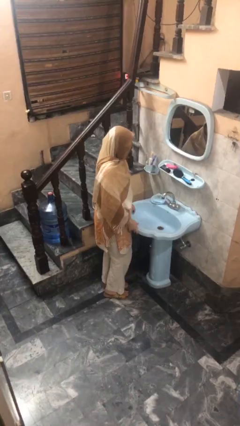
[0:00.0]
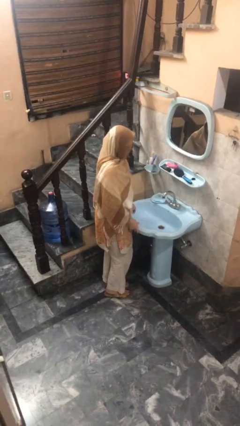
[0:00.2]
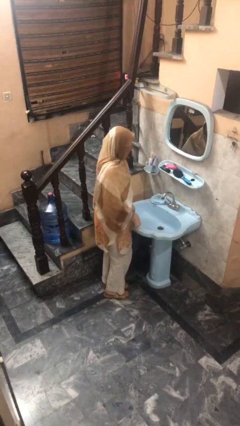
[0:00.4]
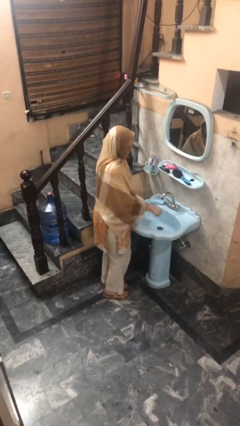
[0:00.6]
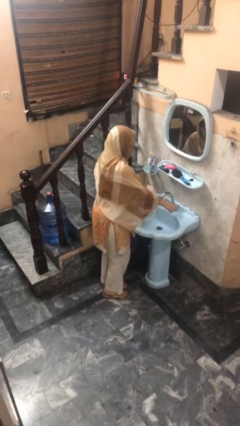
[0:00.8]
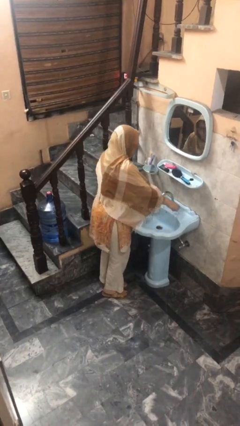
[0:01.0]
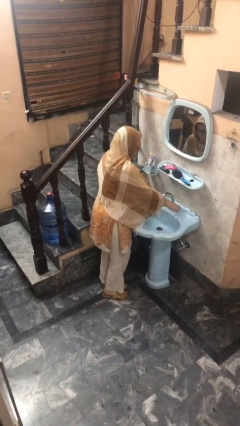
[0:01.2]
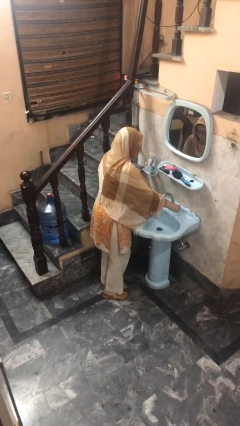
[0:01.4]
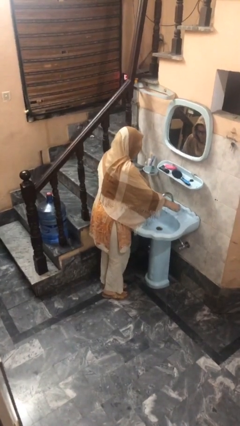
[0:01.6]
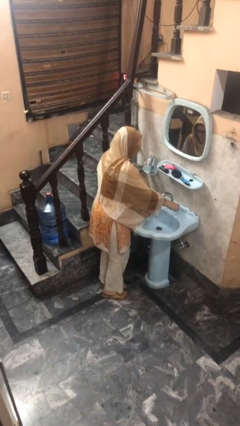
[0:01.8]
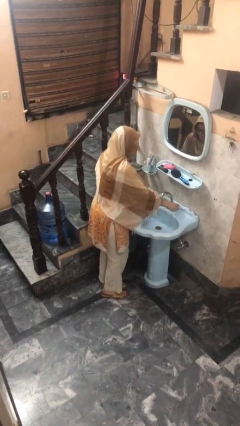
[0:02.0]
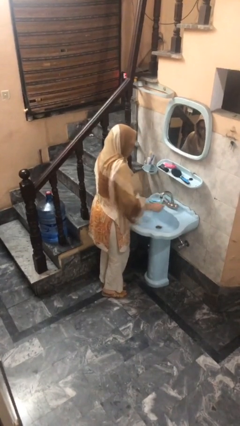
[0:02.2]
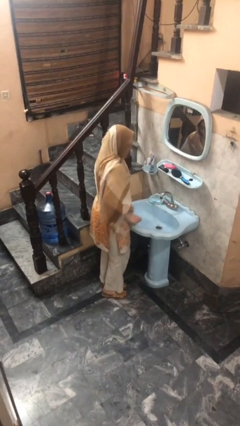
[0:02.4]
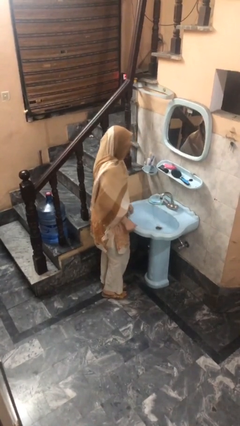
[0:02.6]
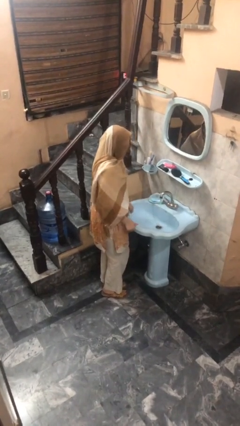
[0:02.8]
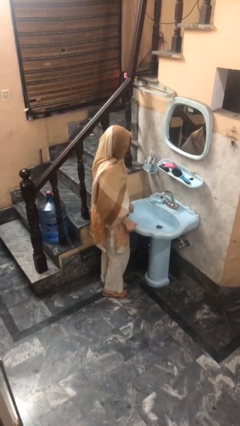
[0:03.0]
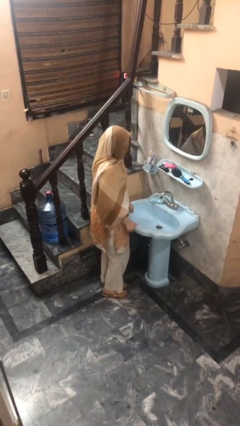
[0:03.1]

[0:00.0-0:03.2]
person turns on faucet

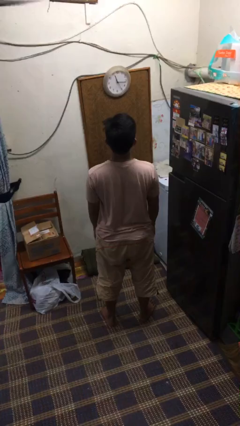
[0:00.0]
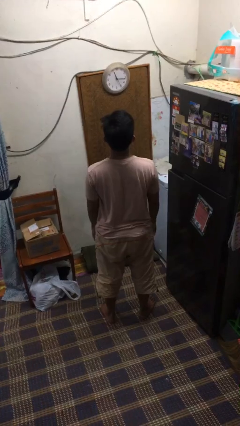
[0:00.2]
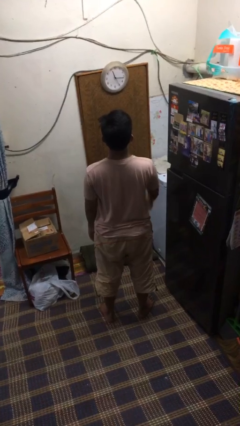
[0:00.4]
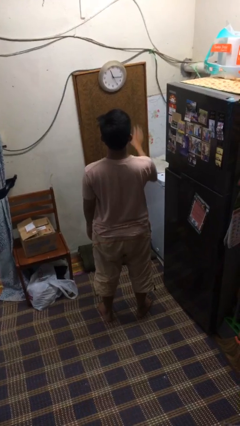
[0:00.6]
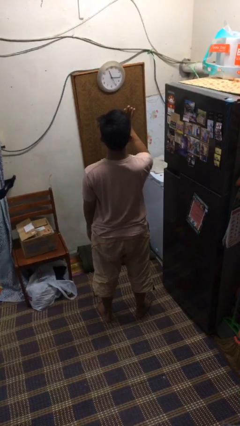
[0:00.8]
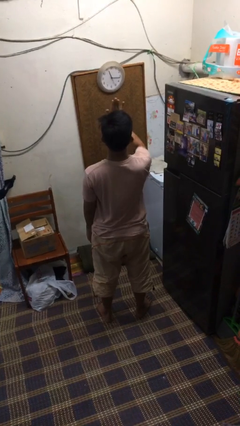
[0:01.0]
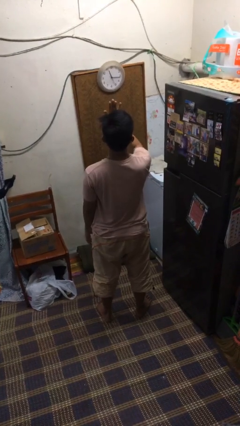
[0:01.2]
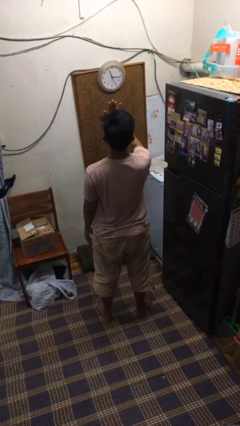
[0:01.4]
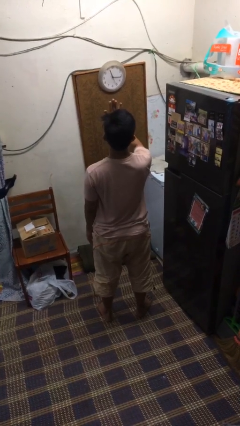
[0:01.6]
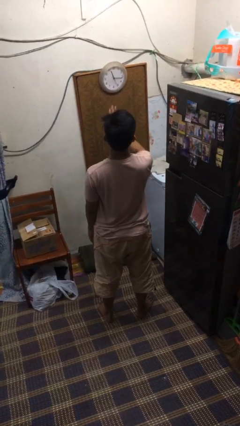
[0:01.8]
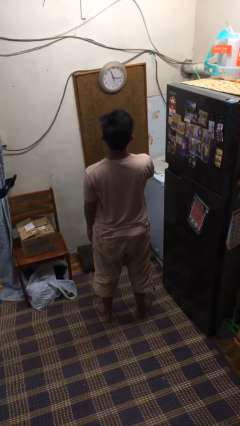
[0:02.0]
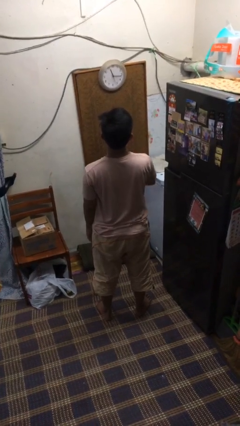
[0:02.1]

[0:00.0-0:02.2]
person gestures stop

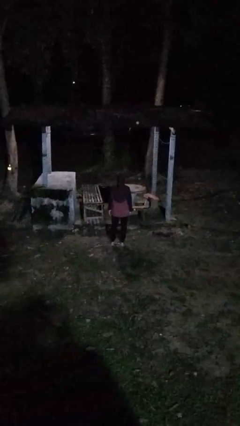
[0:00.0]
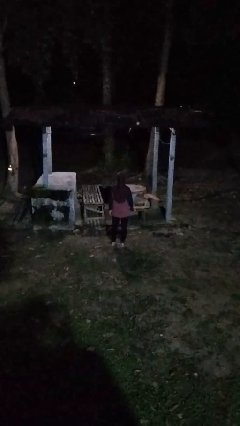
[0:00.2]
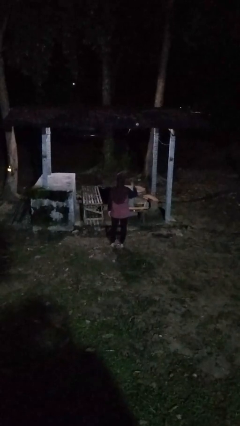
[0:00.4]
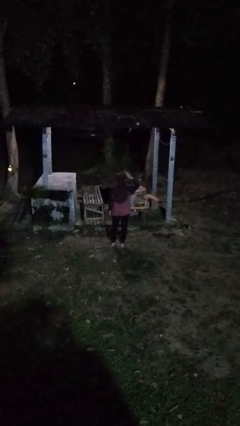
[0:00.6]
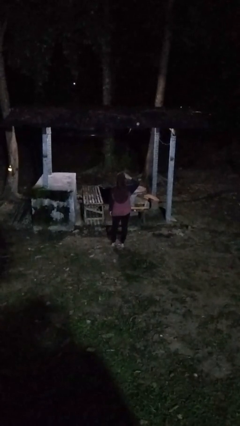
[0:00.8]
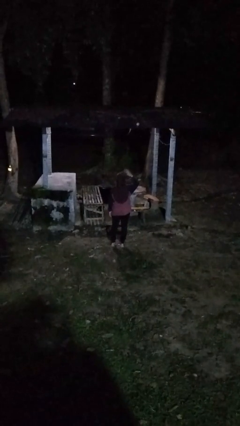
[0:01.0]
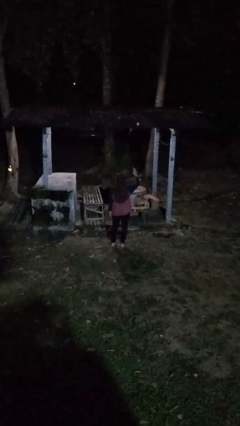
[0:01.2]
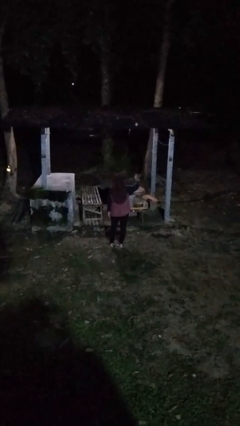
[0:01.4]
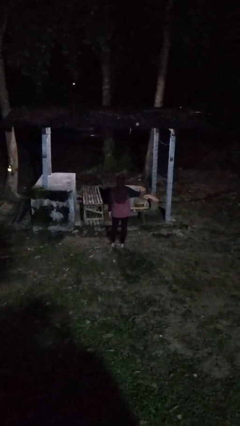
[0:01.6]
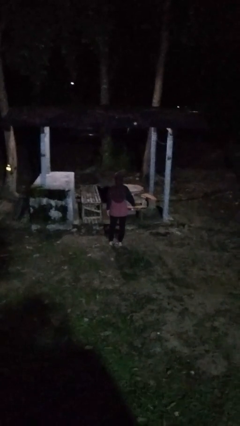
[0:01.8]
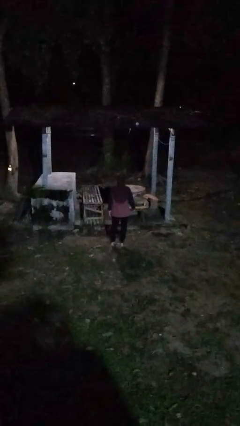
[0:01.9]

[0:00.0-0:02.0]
person salutes

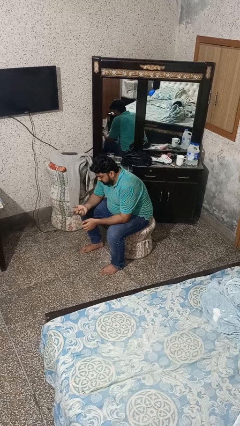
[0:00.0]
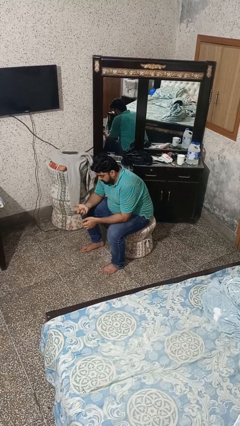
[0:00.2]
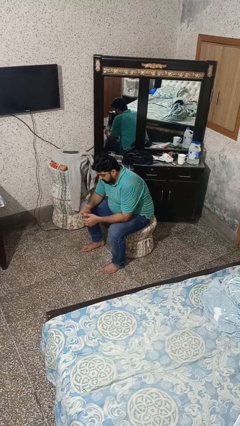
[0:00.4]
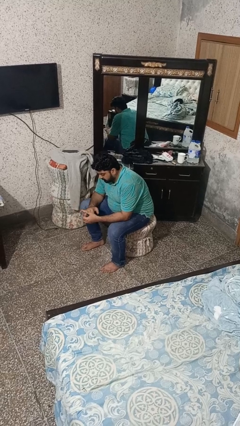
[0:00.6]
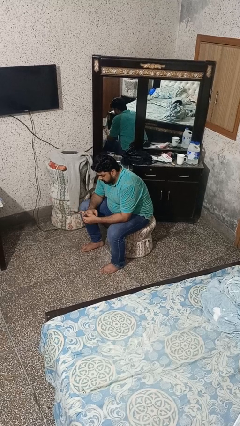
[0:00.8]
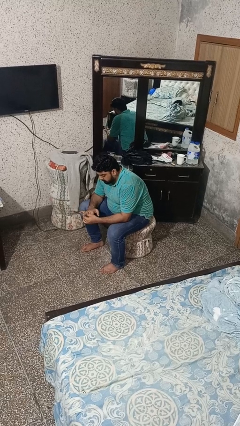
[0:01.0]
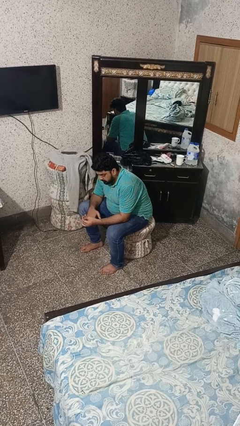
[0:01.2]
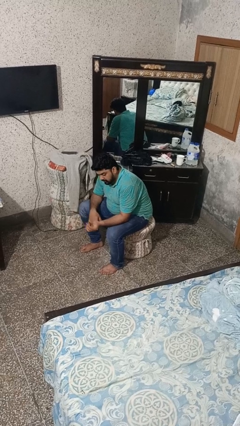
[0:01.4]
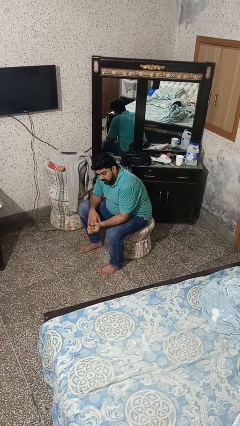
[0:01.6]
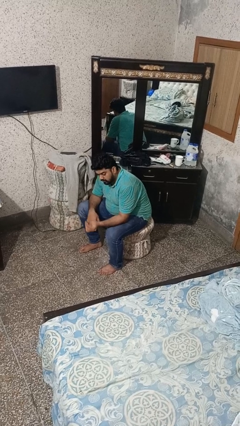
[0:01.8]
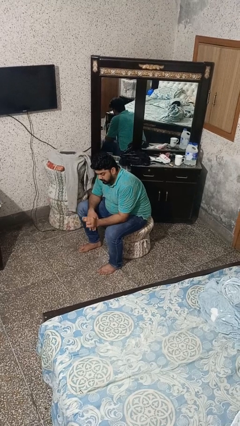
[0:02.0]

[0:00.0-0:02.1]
person takes off ring

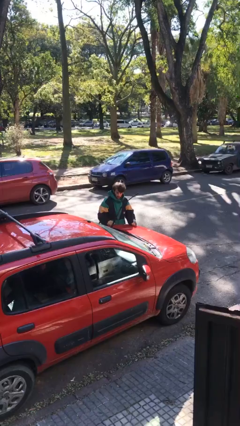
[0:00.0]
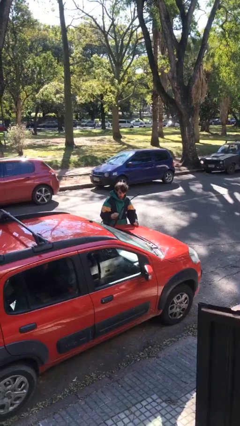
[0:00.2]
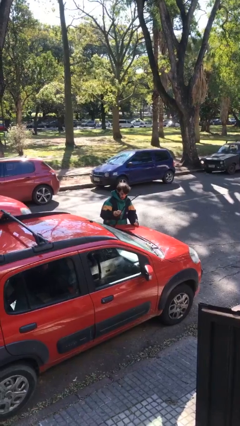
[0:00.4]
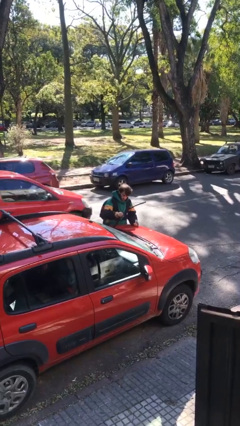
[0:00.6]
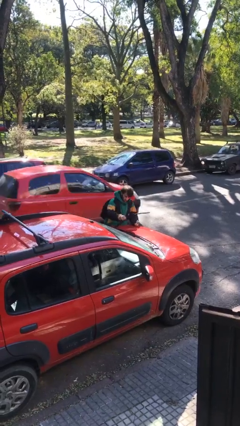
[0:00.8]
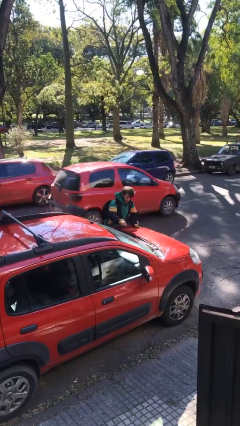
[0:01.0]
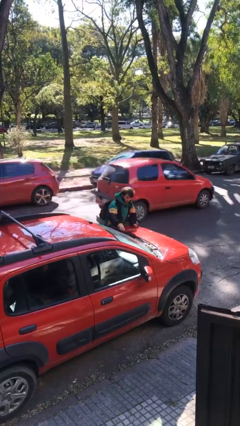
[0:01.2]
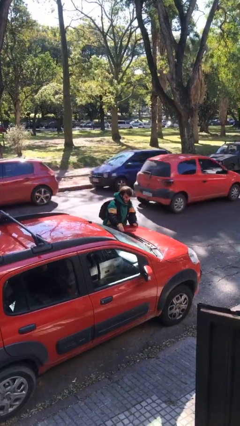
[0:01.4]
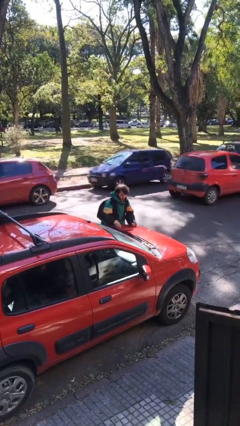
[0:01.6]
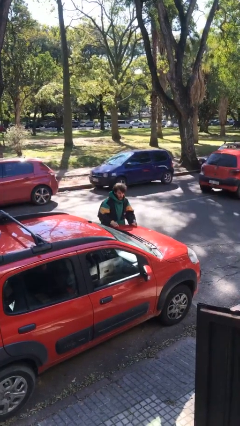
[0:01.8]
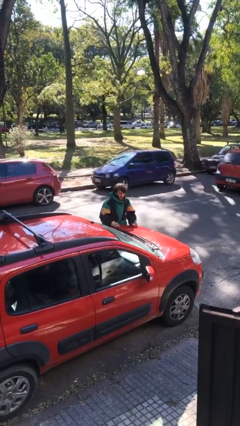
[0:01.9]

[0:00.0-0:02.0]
person flips down car wipers

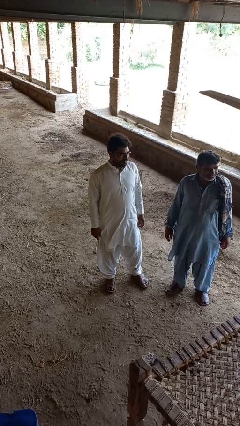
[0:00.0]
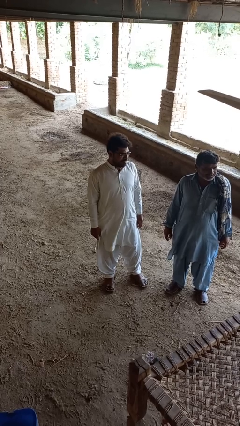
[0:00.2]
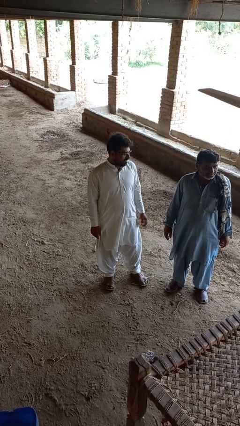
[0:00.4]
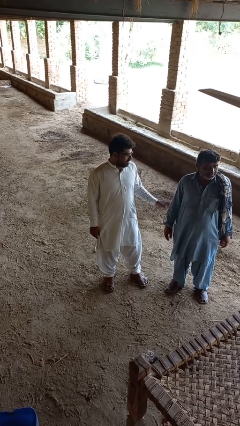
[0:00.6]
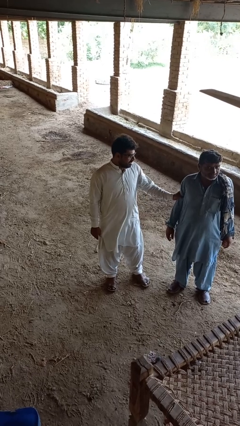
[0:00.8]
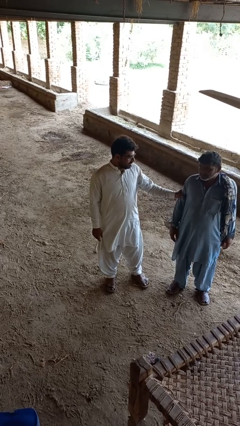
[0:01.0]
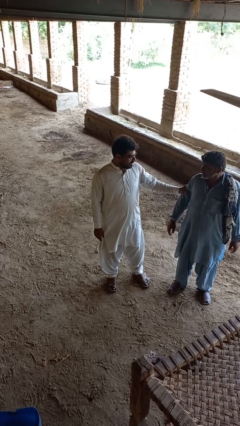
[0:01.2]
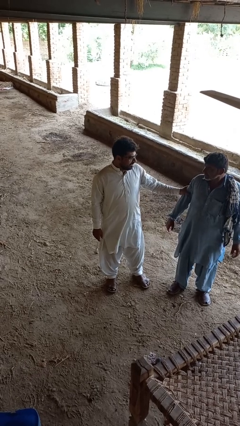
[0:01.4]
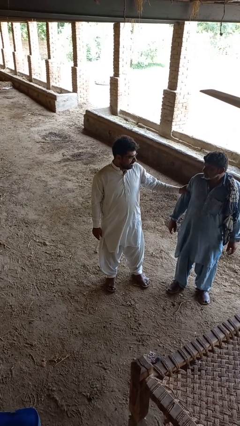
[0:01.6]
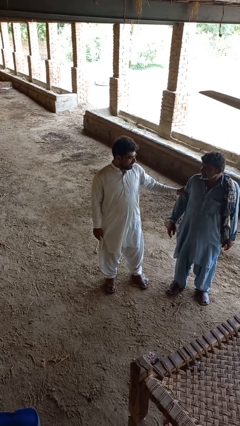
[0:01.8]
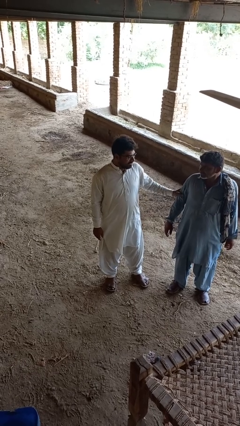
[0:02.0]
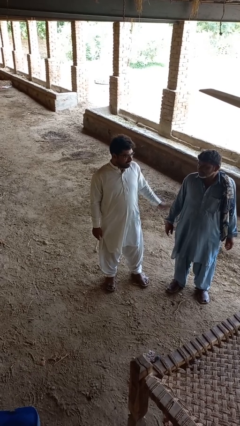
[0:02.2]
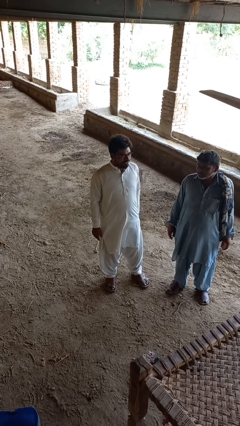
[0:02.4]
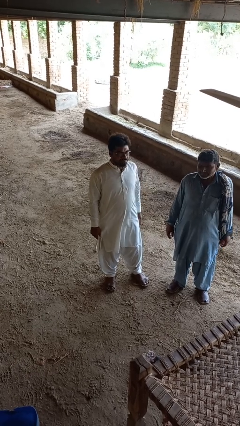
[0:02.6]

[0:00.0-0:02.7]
person grabs person by bicep

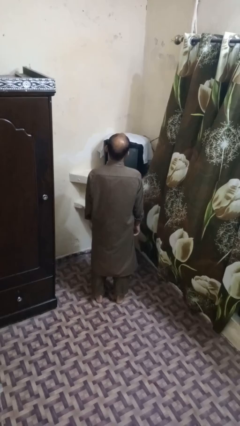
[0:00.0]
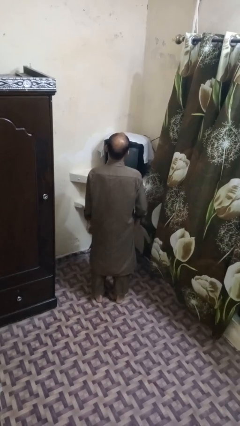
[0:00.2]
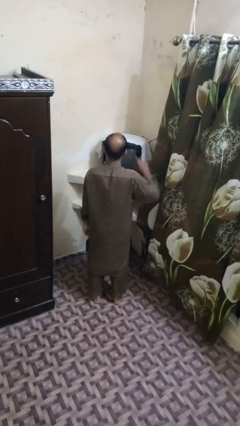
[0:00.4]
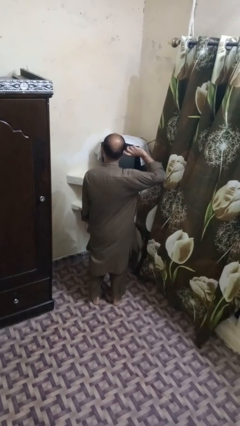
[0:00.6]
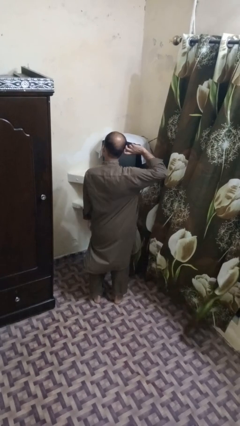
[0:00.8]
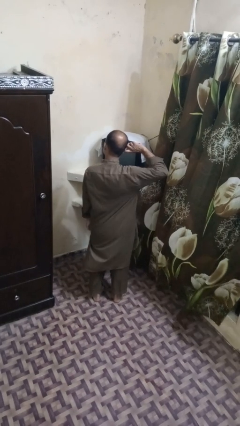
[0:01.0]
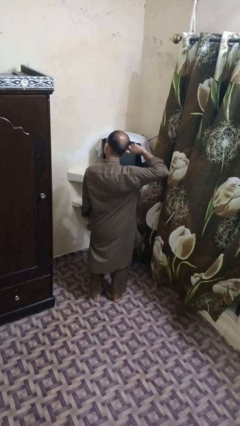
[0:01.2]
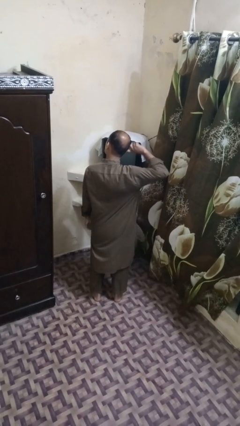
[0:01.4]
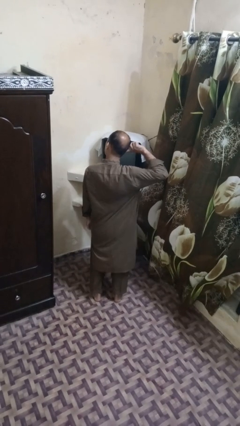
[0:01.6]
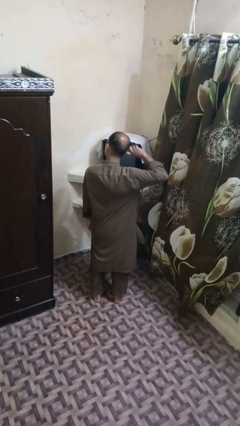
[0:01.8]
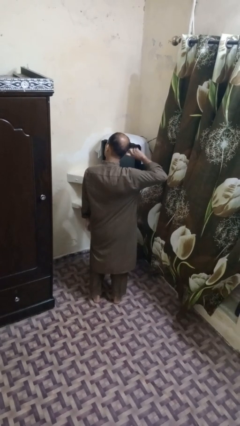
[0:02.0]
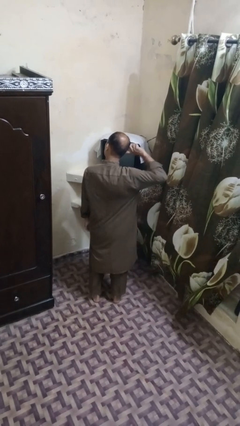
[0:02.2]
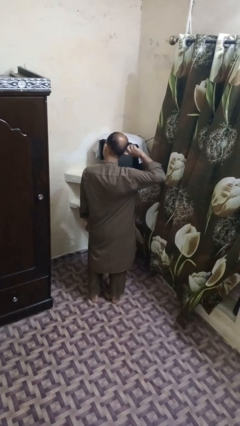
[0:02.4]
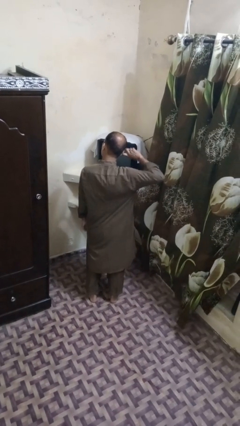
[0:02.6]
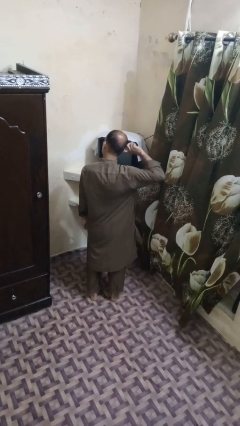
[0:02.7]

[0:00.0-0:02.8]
person puts fingers in ear

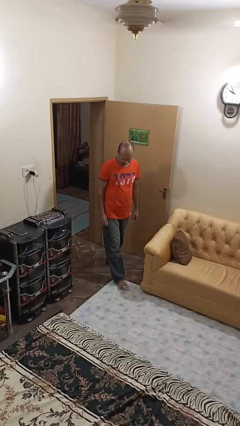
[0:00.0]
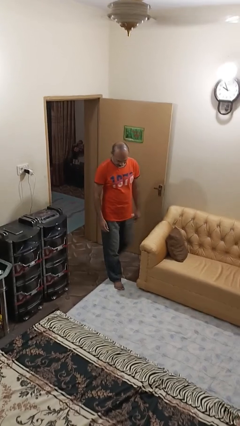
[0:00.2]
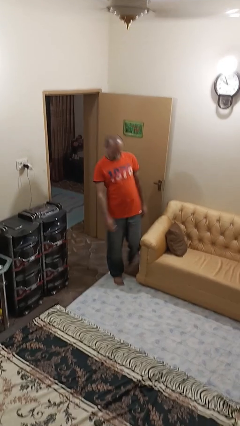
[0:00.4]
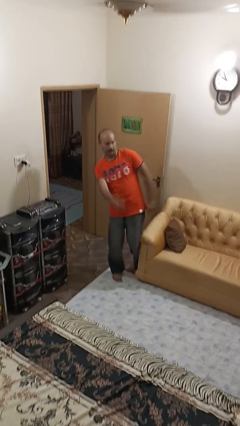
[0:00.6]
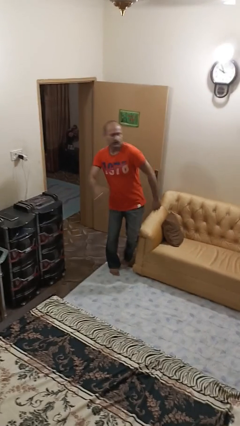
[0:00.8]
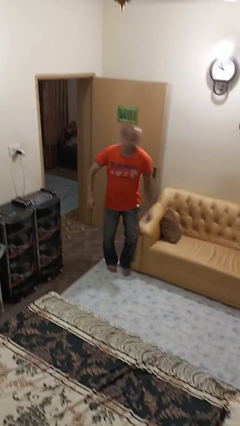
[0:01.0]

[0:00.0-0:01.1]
person trips on object on floor
